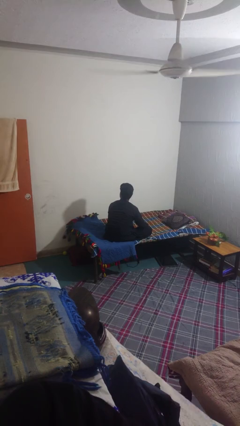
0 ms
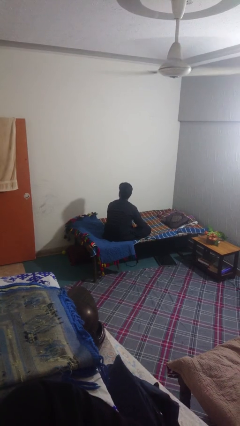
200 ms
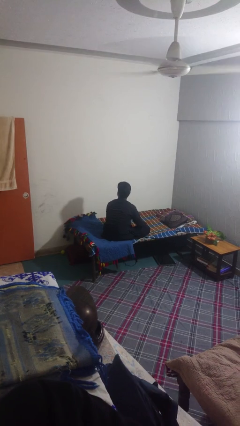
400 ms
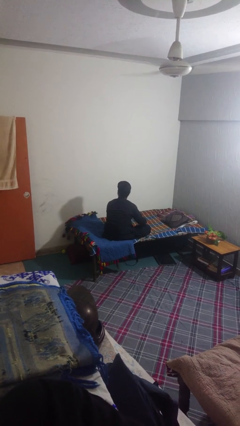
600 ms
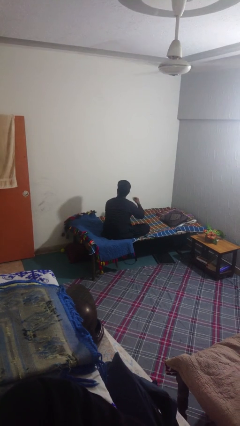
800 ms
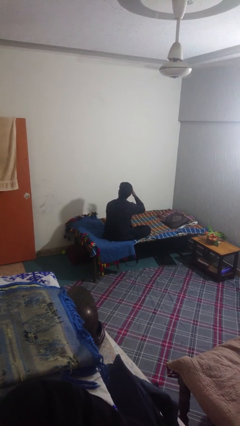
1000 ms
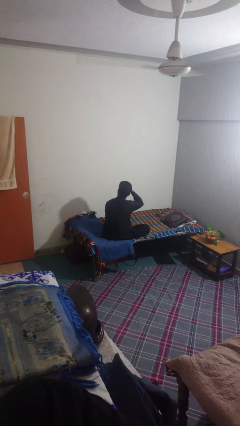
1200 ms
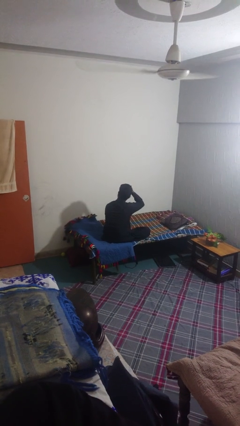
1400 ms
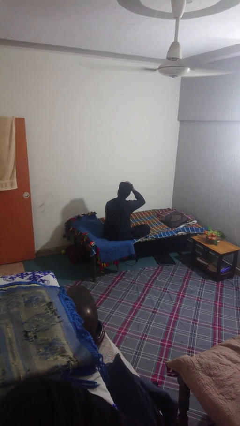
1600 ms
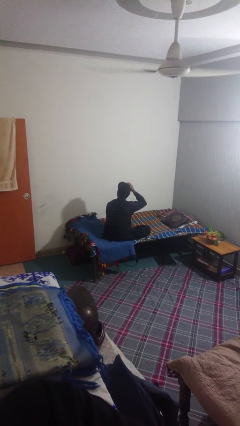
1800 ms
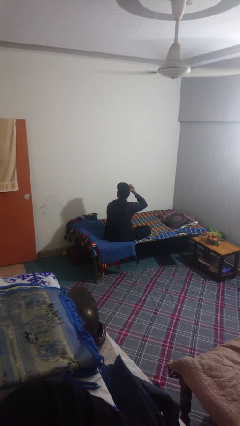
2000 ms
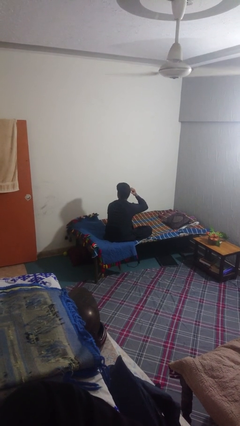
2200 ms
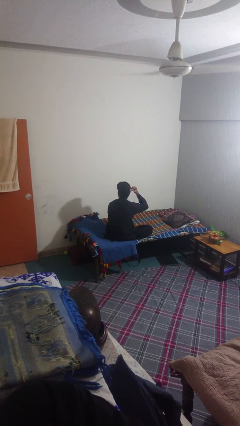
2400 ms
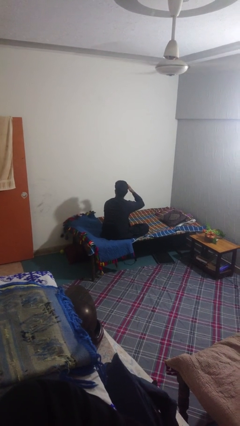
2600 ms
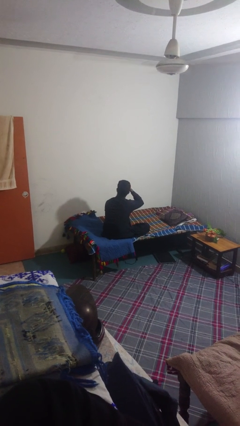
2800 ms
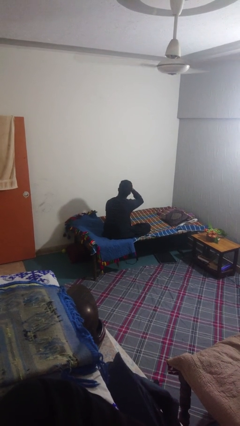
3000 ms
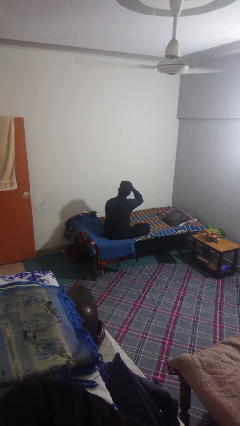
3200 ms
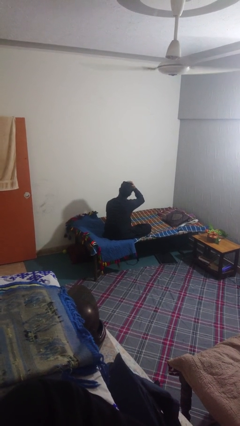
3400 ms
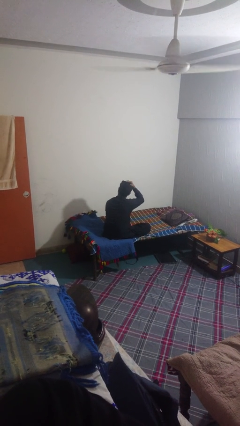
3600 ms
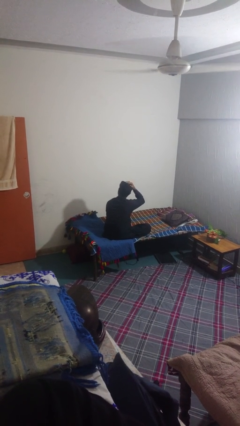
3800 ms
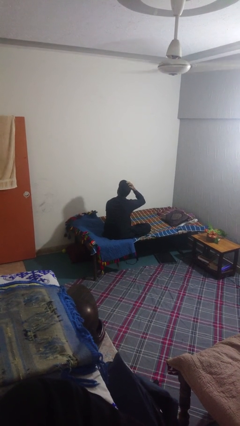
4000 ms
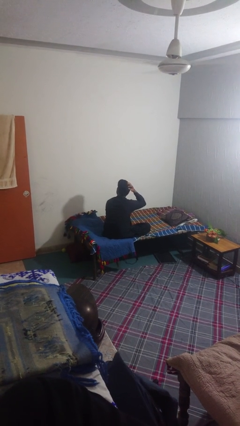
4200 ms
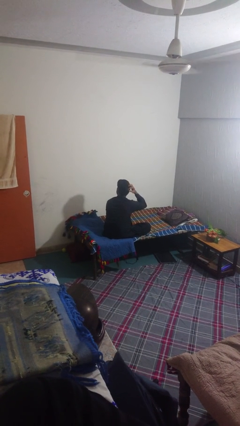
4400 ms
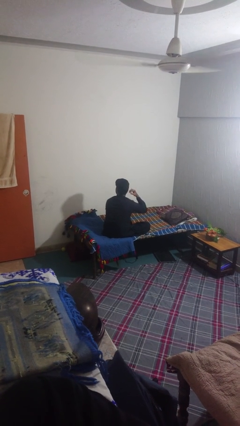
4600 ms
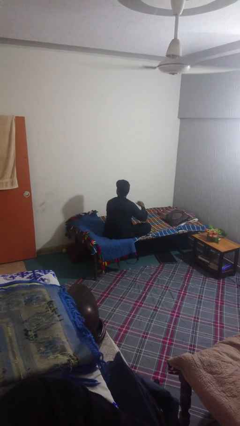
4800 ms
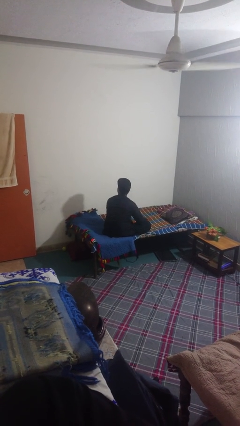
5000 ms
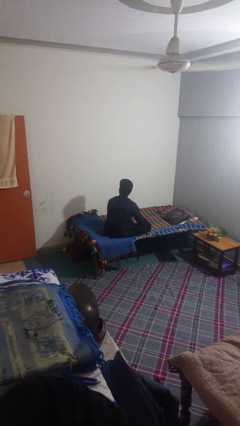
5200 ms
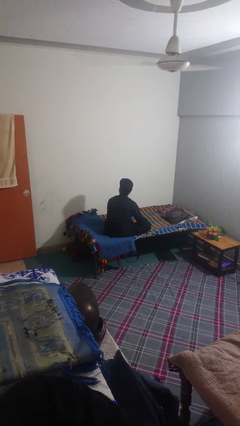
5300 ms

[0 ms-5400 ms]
person strokes hair

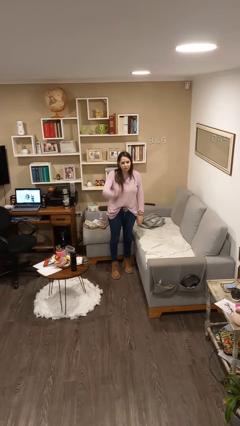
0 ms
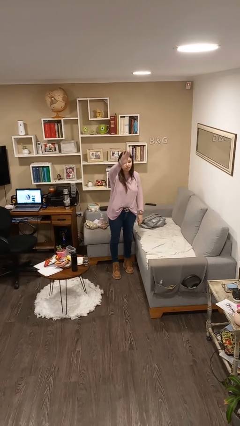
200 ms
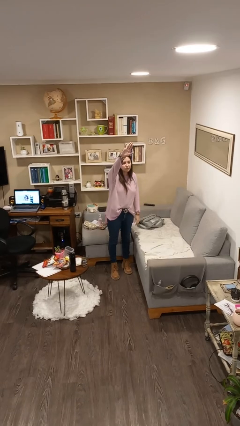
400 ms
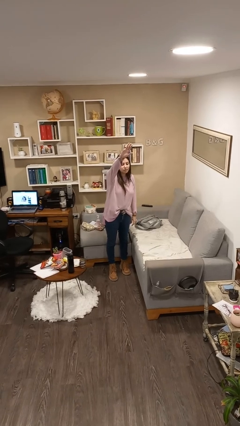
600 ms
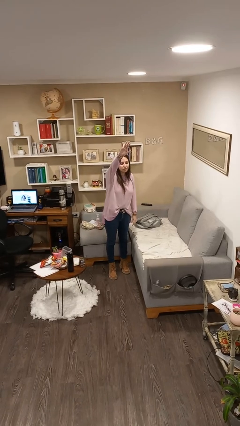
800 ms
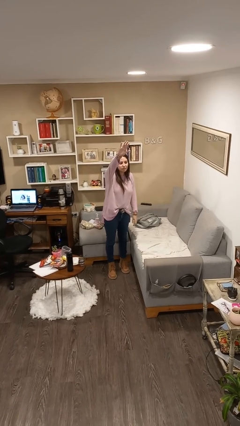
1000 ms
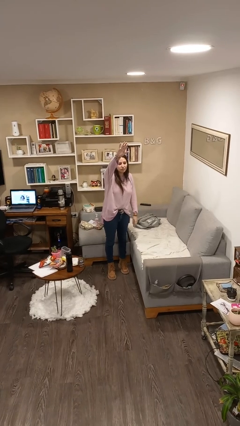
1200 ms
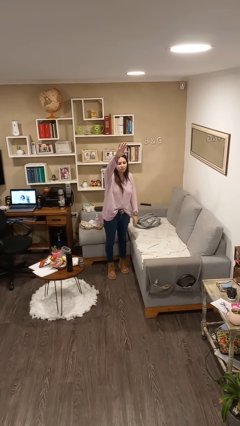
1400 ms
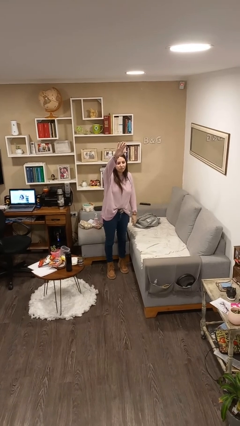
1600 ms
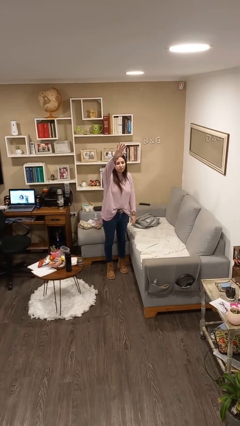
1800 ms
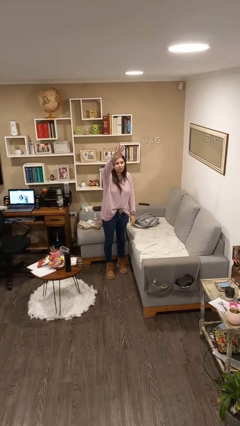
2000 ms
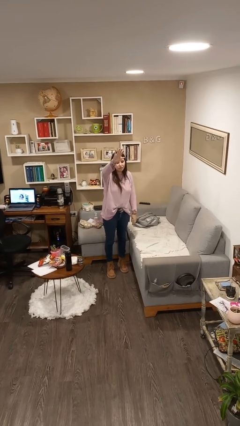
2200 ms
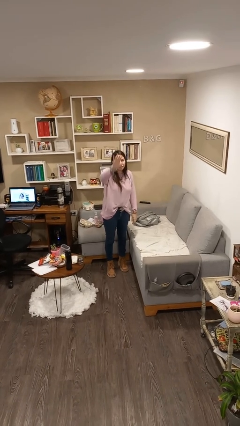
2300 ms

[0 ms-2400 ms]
person gestures raise hand

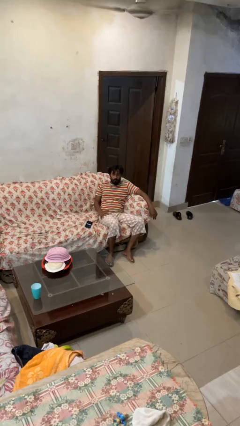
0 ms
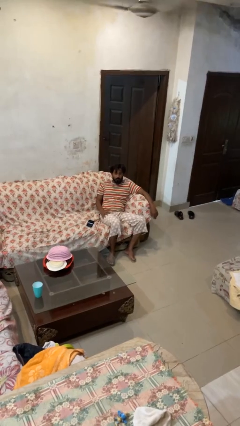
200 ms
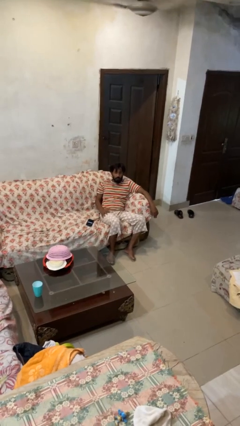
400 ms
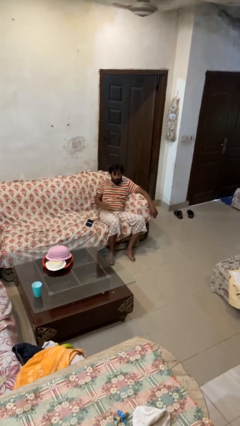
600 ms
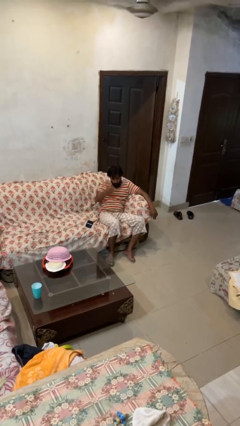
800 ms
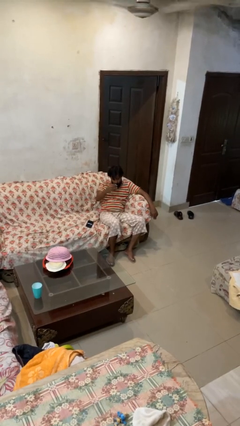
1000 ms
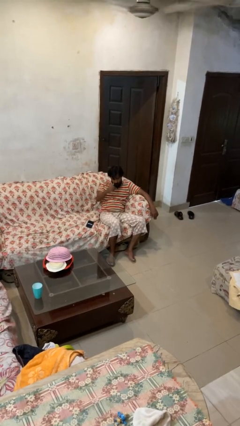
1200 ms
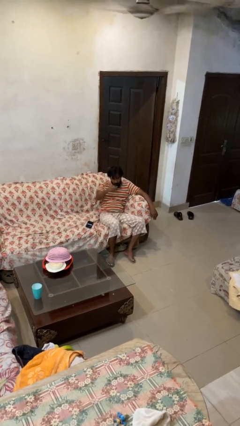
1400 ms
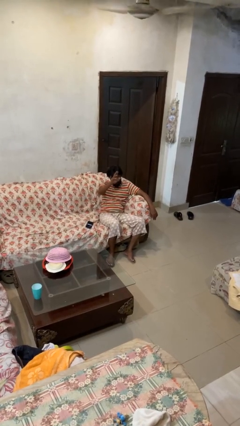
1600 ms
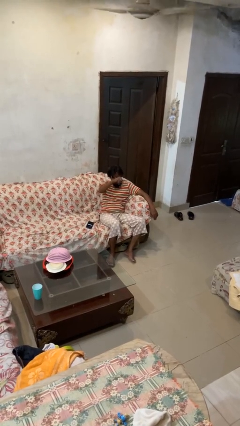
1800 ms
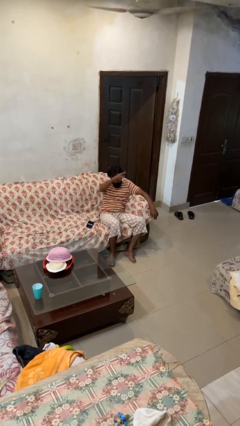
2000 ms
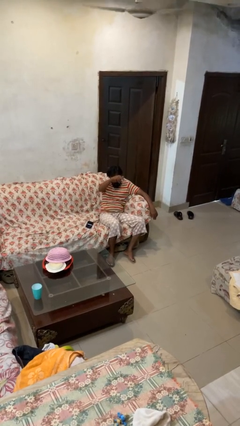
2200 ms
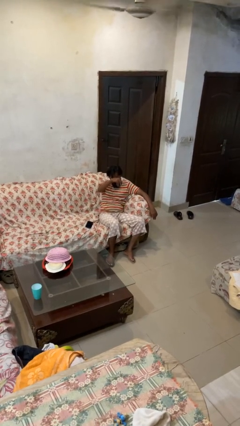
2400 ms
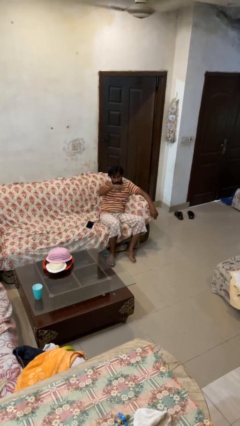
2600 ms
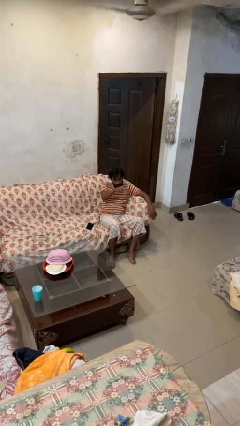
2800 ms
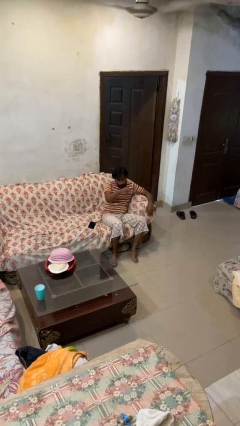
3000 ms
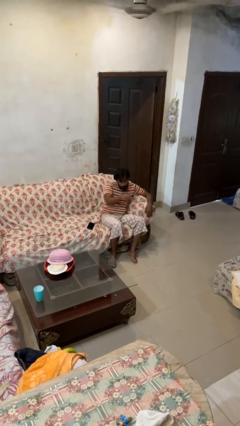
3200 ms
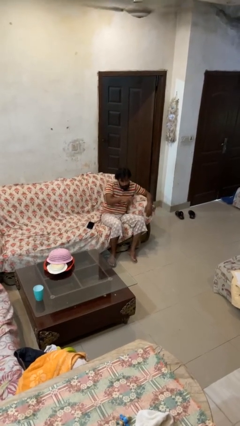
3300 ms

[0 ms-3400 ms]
person gestures come here

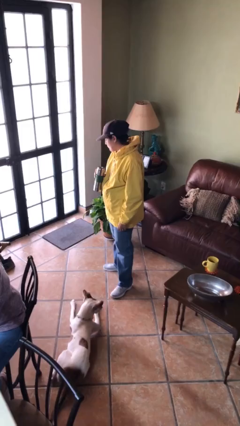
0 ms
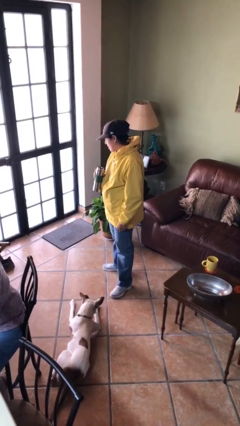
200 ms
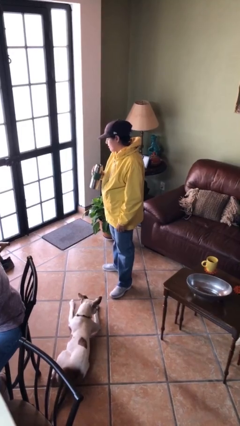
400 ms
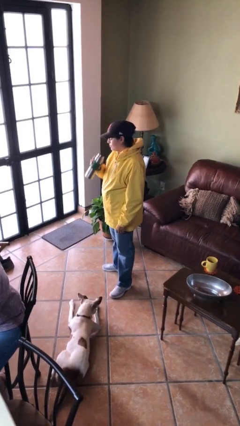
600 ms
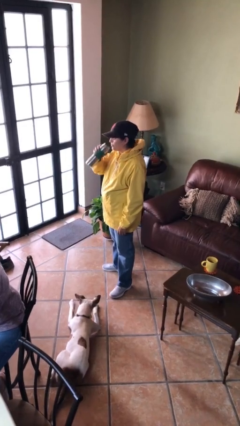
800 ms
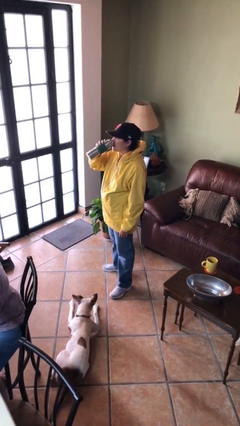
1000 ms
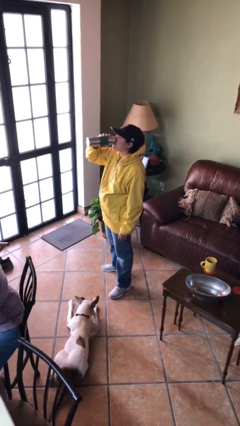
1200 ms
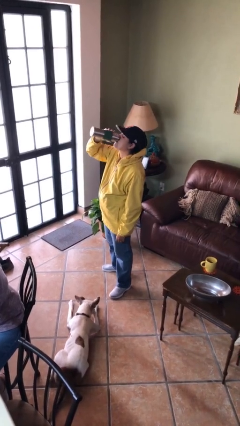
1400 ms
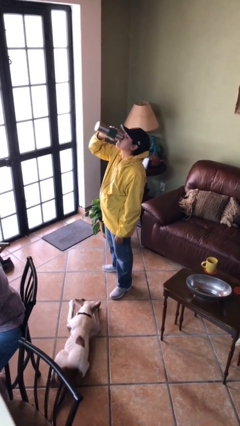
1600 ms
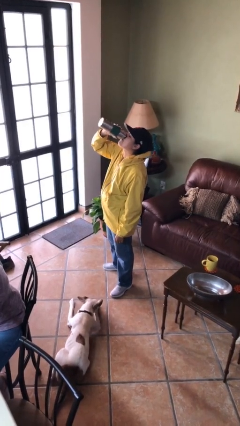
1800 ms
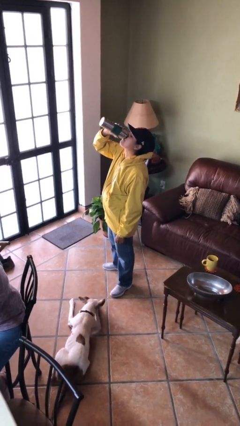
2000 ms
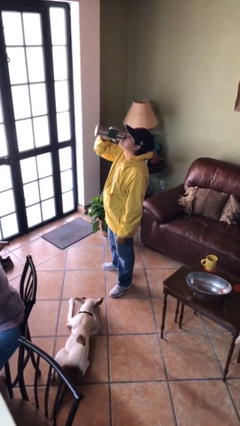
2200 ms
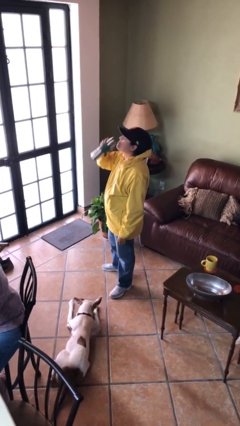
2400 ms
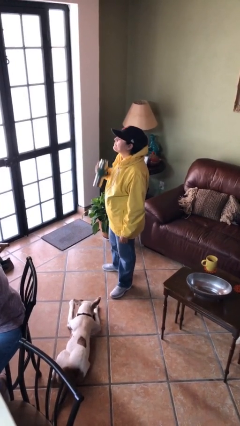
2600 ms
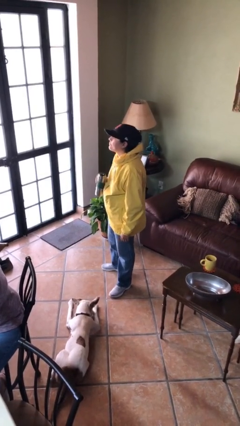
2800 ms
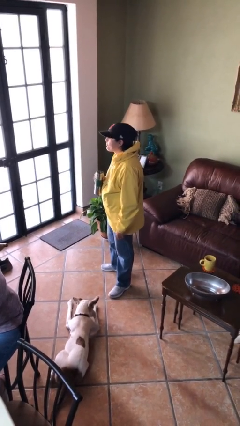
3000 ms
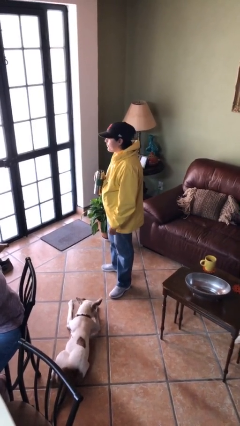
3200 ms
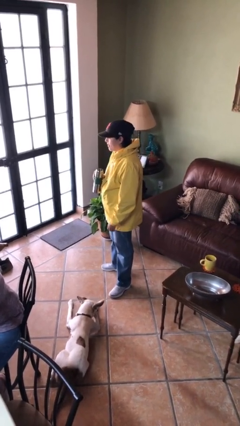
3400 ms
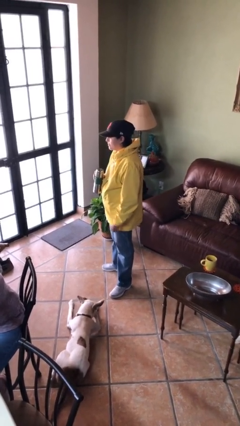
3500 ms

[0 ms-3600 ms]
person drinks from bottle

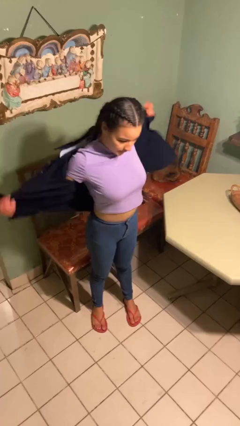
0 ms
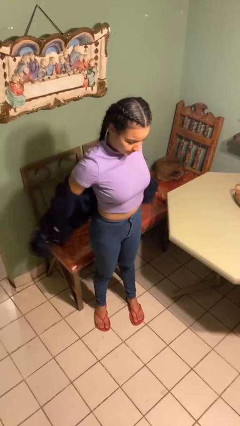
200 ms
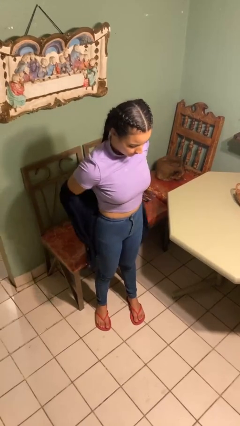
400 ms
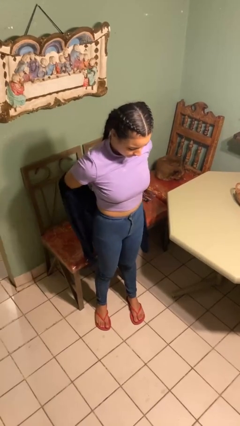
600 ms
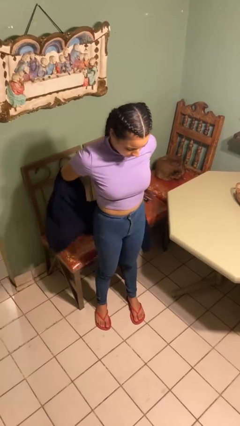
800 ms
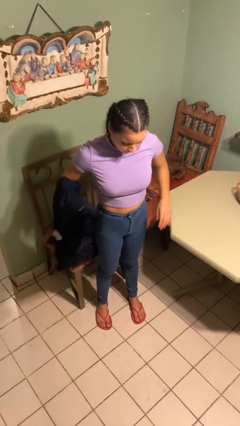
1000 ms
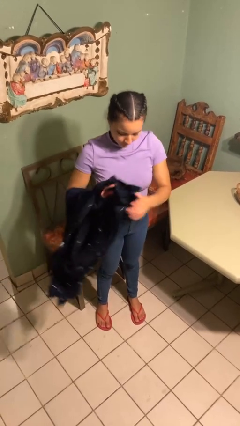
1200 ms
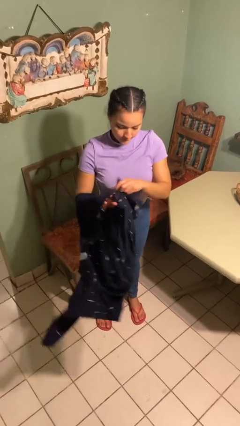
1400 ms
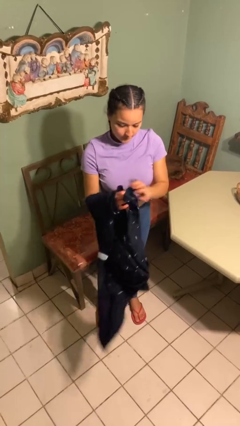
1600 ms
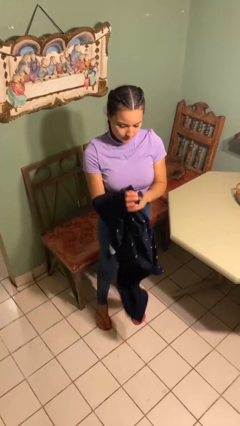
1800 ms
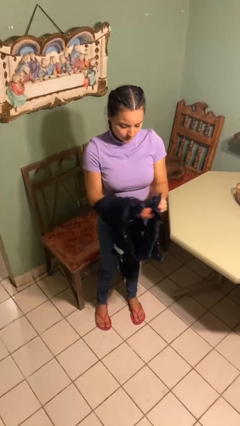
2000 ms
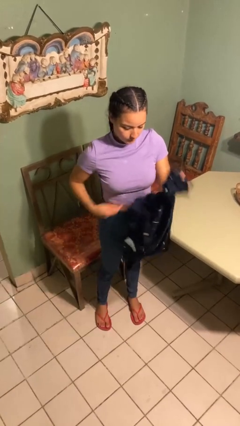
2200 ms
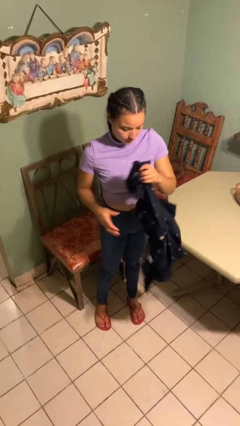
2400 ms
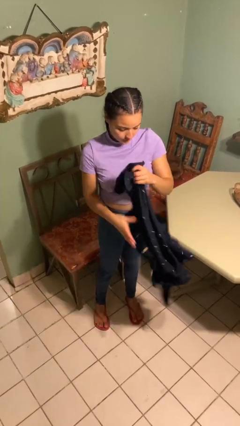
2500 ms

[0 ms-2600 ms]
person takes off shirt
